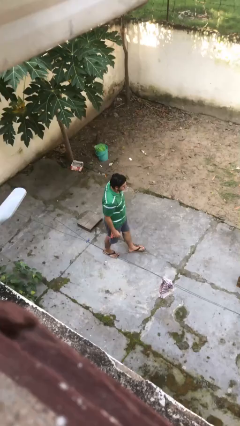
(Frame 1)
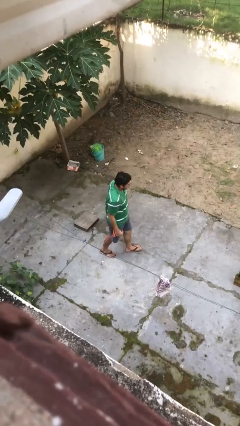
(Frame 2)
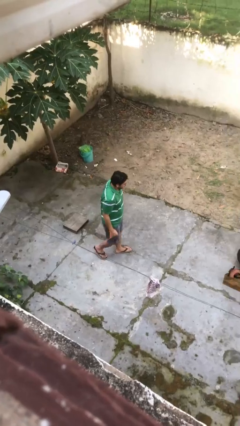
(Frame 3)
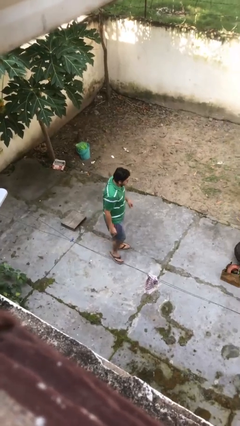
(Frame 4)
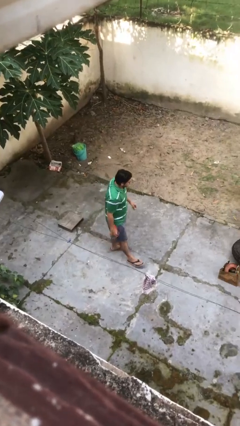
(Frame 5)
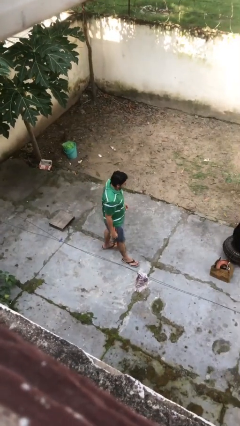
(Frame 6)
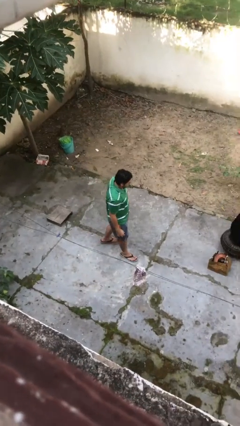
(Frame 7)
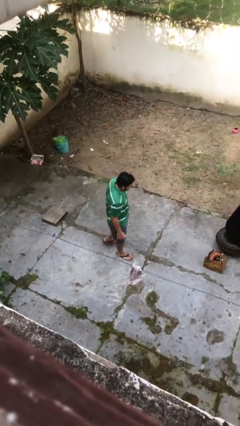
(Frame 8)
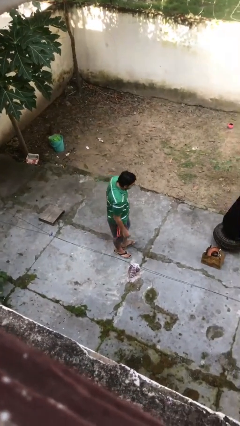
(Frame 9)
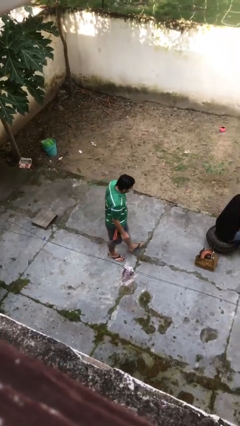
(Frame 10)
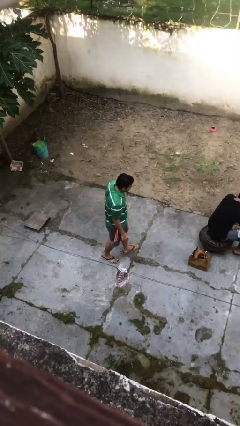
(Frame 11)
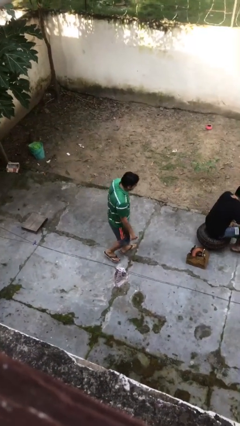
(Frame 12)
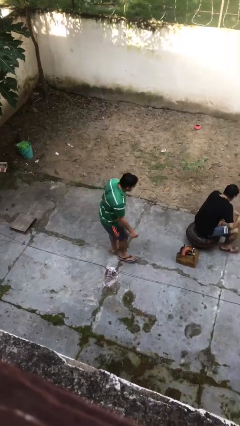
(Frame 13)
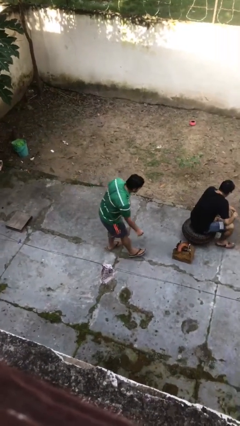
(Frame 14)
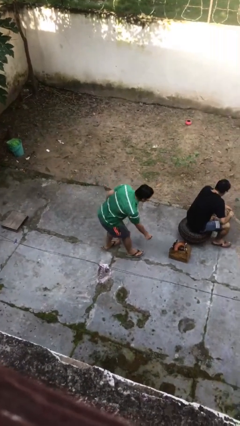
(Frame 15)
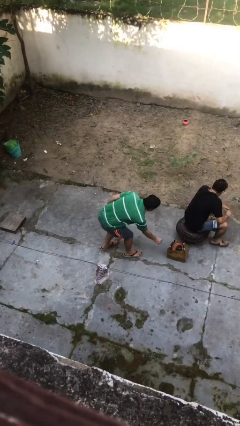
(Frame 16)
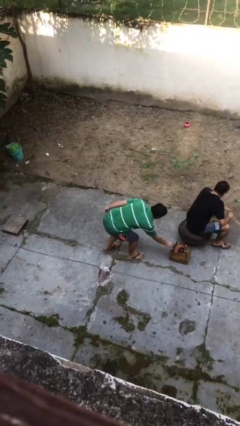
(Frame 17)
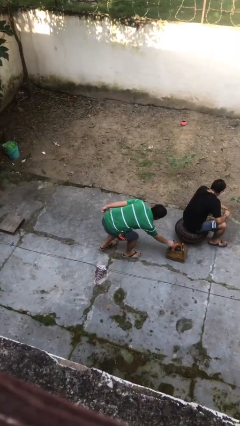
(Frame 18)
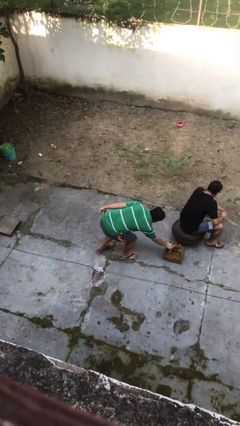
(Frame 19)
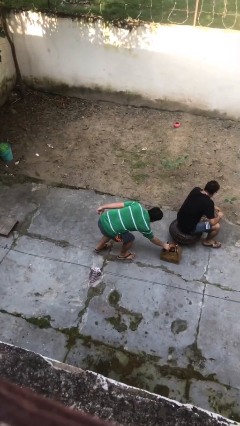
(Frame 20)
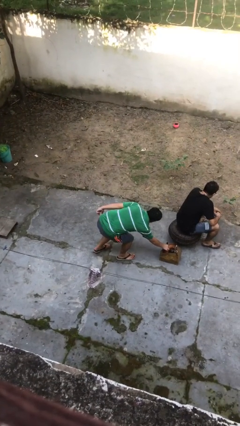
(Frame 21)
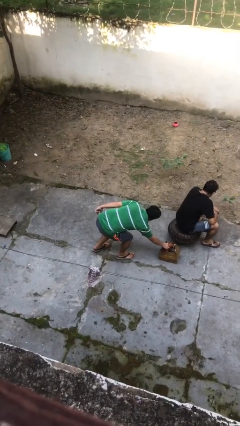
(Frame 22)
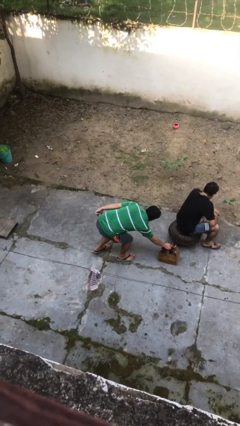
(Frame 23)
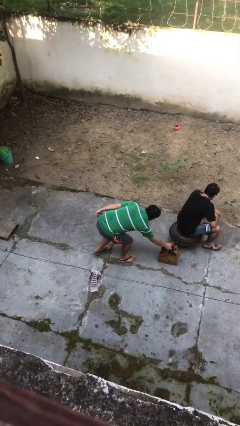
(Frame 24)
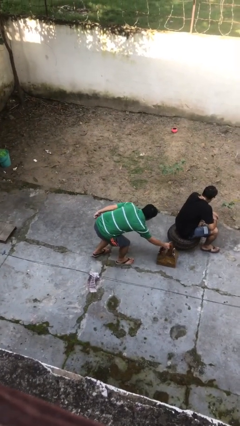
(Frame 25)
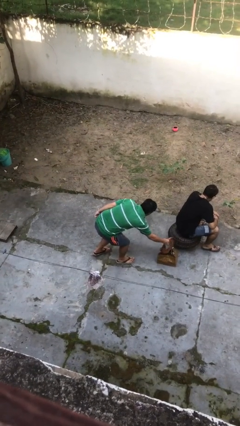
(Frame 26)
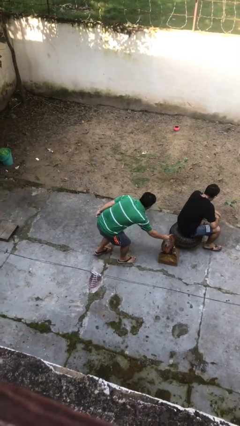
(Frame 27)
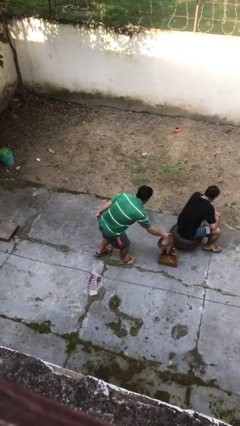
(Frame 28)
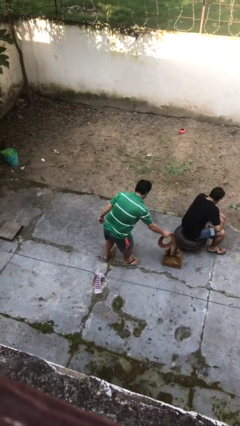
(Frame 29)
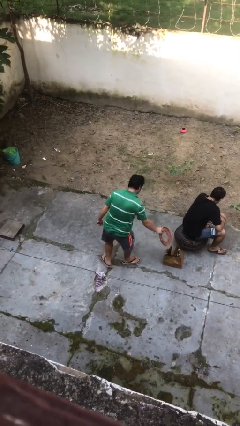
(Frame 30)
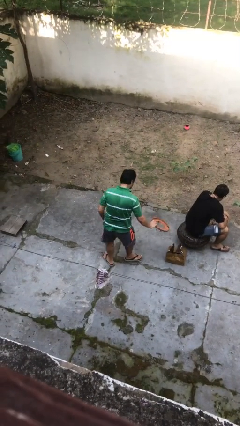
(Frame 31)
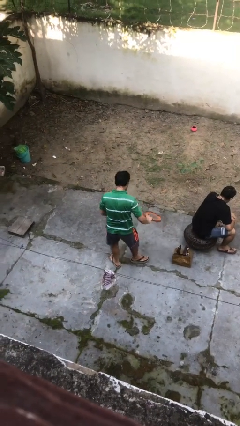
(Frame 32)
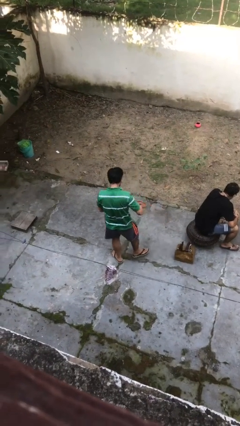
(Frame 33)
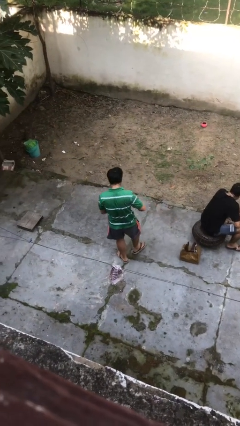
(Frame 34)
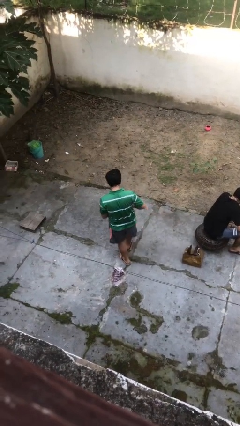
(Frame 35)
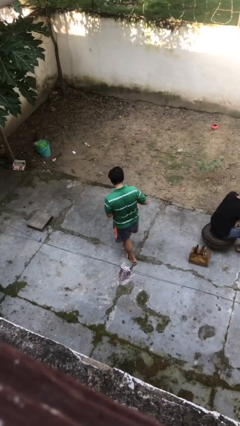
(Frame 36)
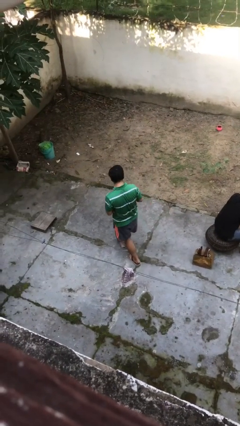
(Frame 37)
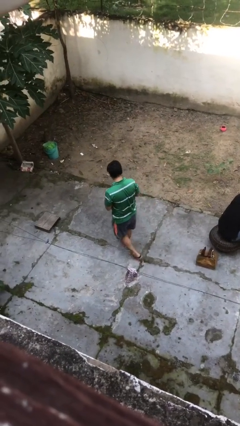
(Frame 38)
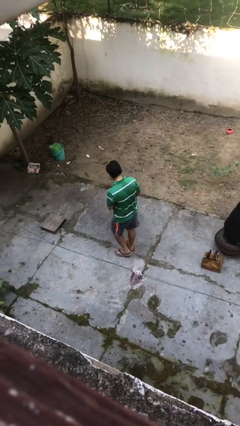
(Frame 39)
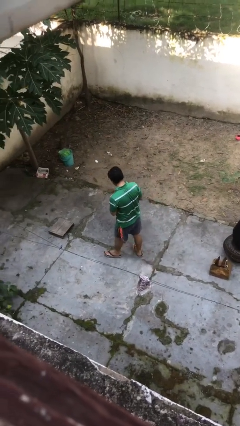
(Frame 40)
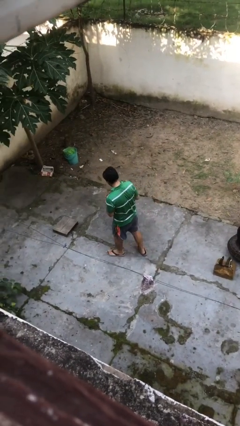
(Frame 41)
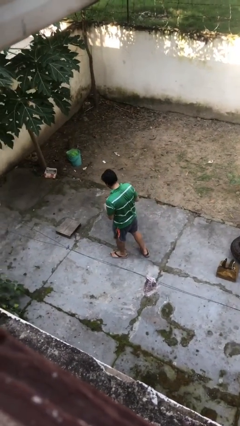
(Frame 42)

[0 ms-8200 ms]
person steals object from person

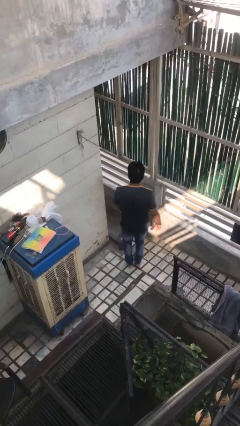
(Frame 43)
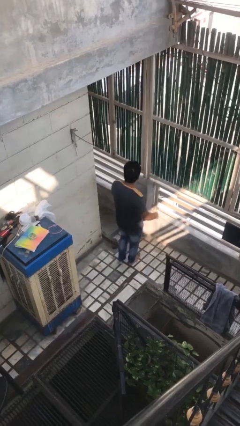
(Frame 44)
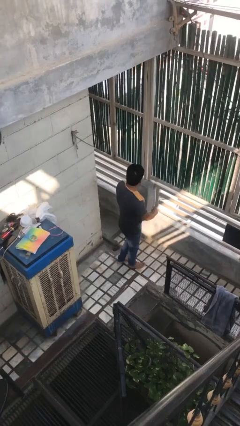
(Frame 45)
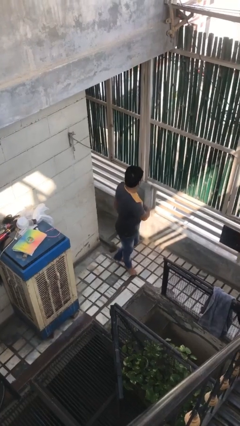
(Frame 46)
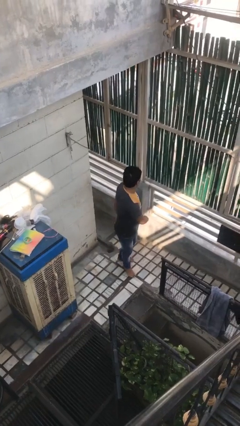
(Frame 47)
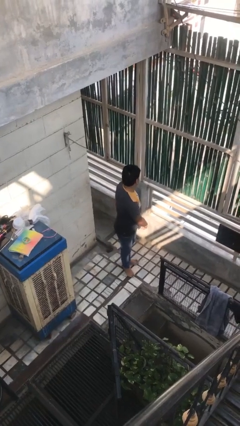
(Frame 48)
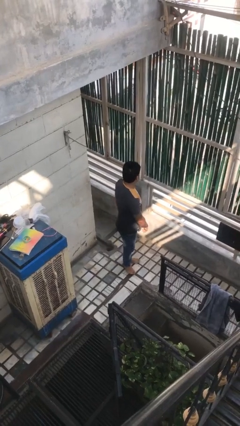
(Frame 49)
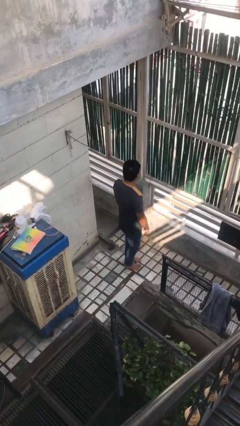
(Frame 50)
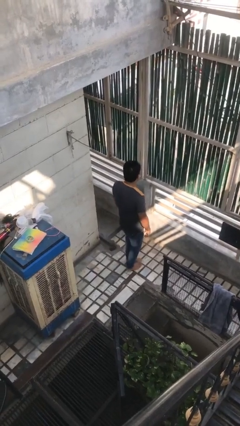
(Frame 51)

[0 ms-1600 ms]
person twirls

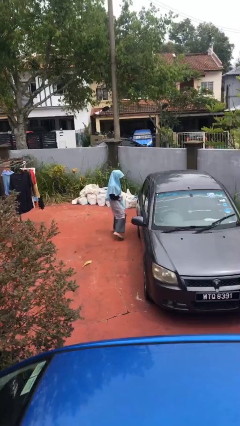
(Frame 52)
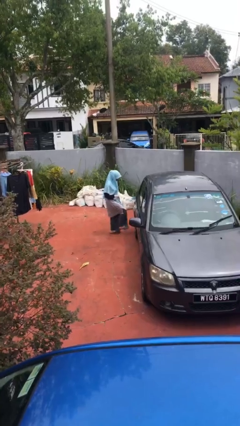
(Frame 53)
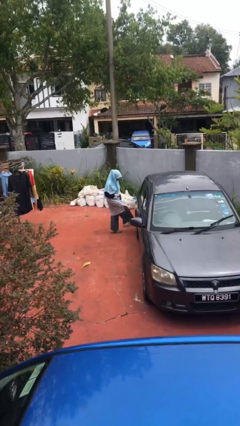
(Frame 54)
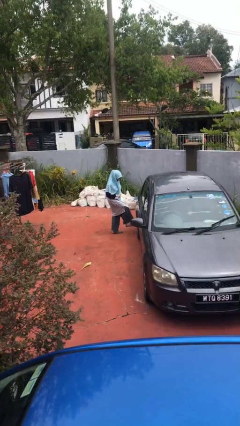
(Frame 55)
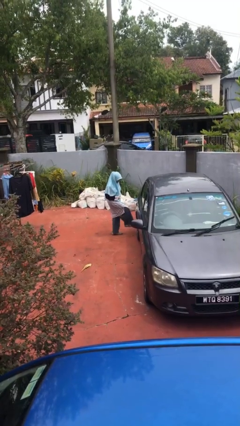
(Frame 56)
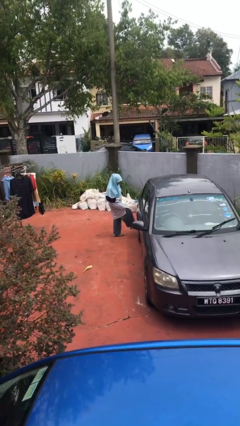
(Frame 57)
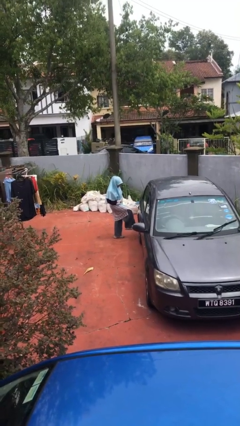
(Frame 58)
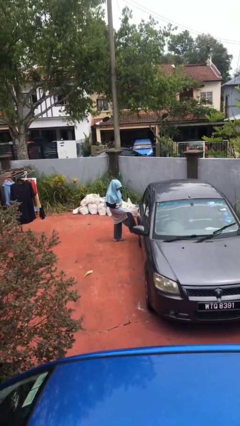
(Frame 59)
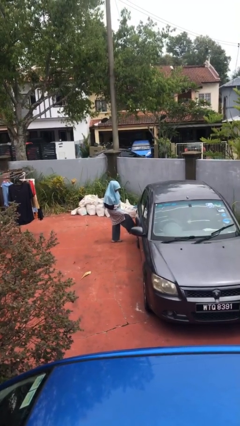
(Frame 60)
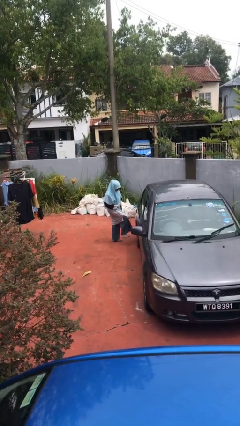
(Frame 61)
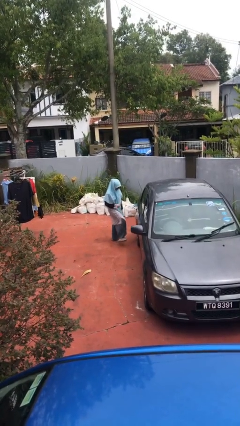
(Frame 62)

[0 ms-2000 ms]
person kicks car tires

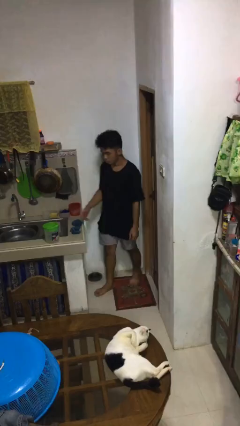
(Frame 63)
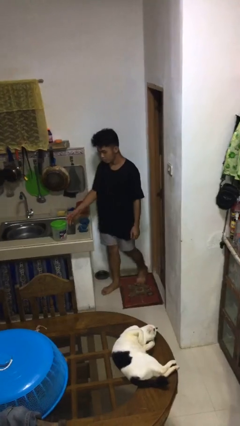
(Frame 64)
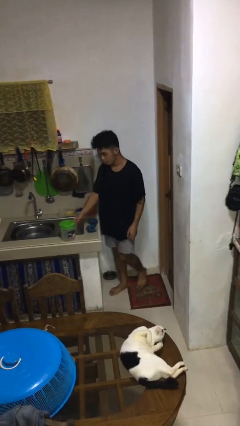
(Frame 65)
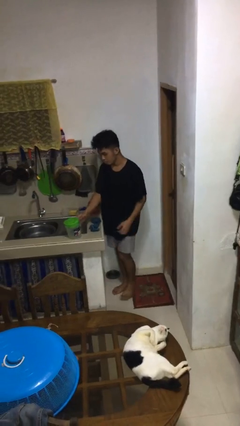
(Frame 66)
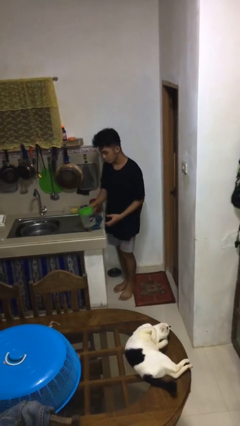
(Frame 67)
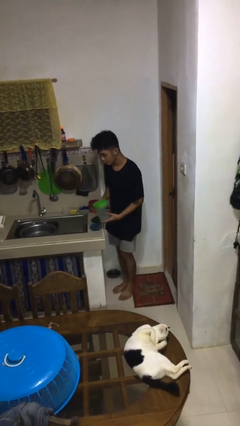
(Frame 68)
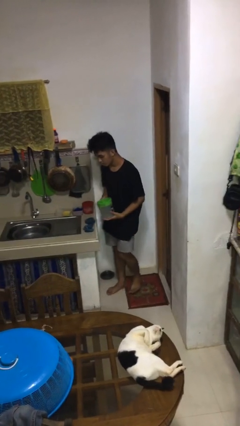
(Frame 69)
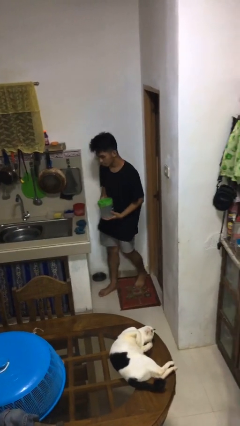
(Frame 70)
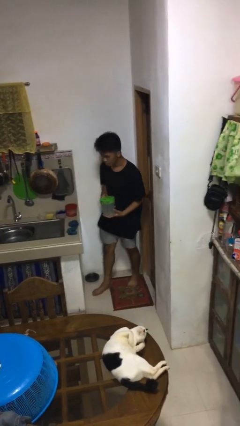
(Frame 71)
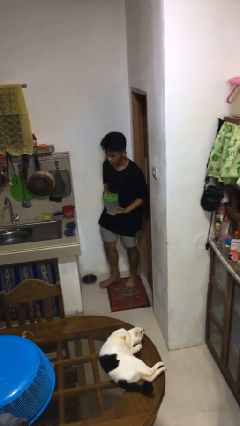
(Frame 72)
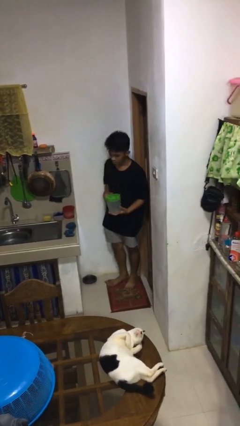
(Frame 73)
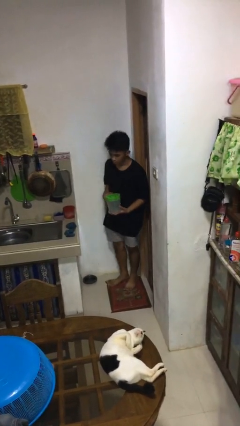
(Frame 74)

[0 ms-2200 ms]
person picks up object from countertop

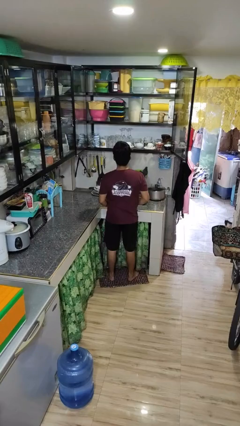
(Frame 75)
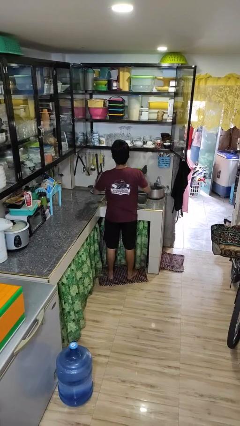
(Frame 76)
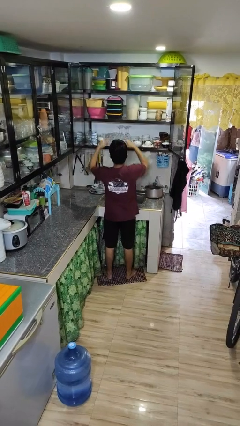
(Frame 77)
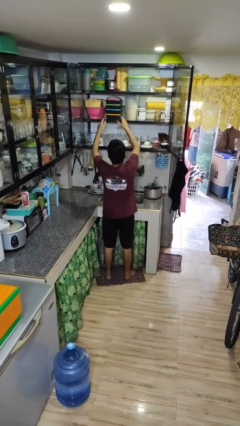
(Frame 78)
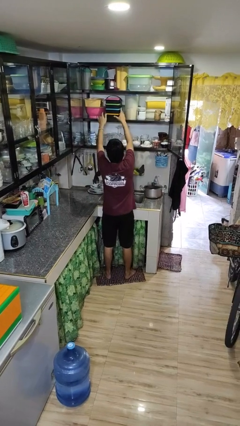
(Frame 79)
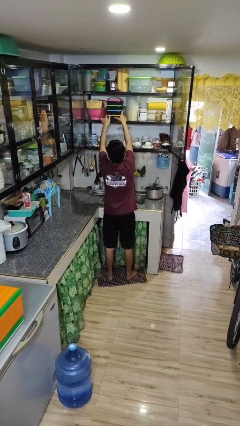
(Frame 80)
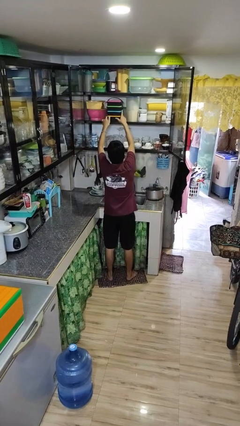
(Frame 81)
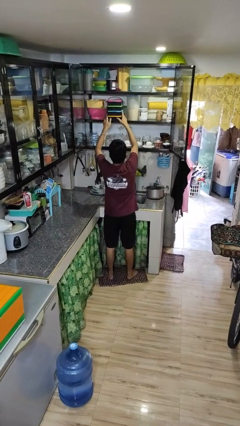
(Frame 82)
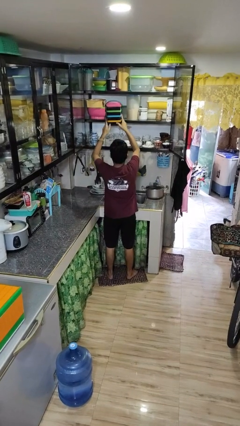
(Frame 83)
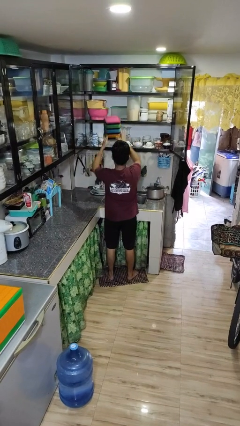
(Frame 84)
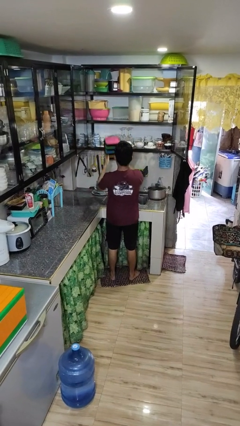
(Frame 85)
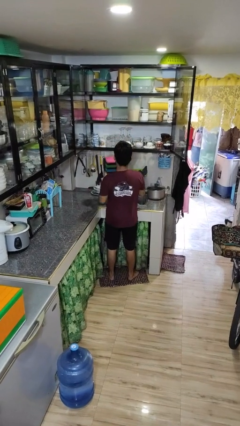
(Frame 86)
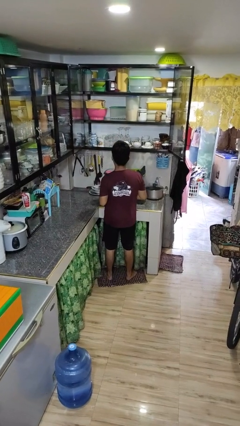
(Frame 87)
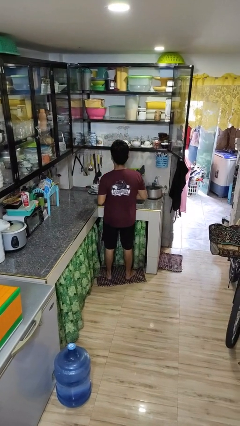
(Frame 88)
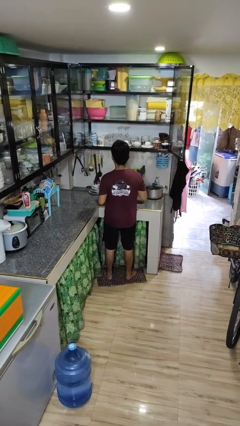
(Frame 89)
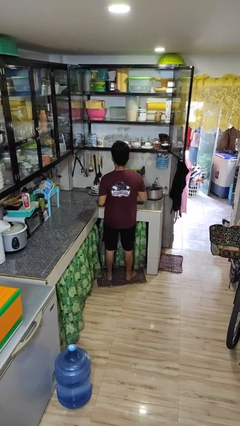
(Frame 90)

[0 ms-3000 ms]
person picks up object from cabinet

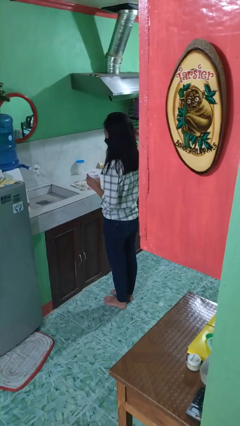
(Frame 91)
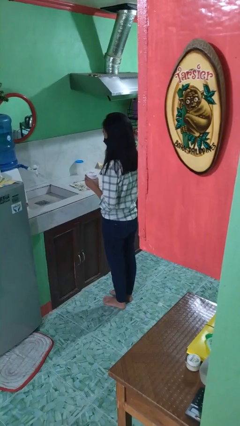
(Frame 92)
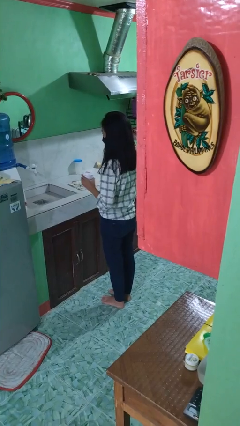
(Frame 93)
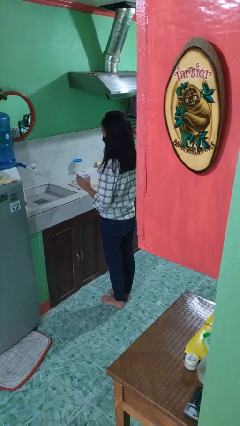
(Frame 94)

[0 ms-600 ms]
person puts down object on countertop
